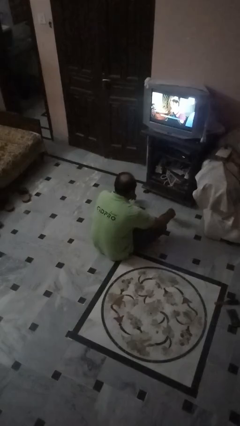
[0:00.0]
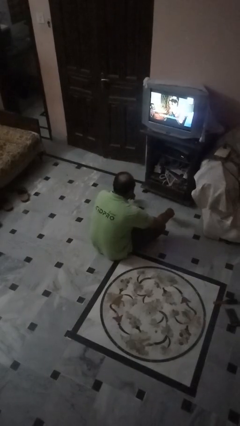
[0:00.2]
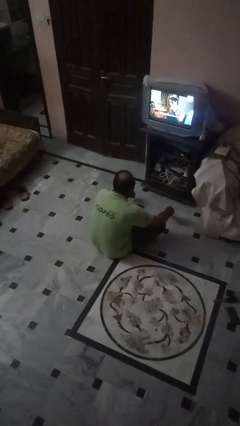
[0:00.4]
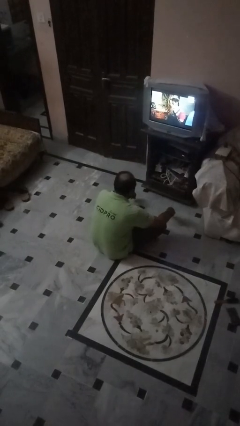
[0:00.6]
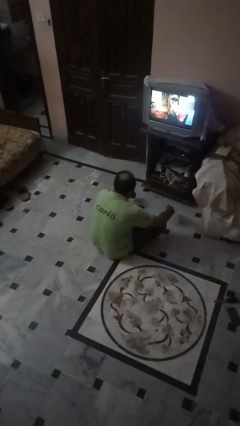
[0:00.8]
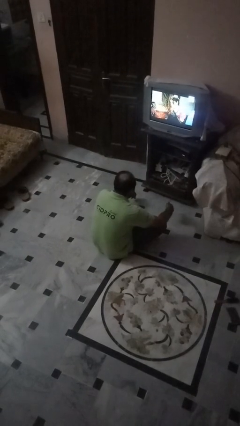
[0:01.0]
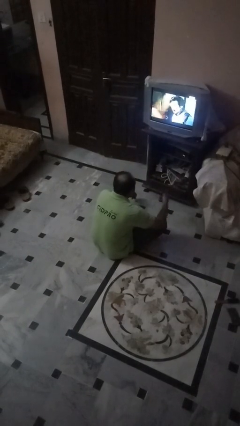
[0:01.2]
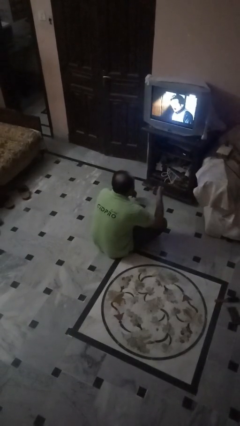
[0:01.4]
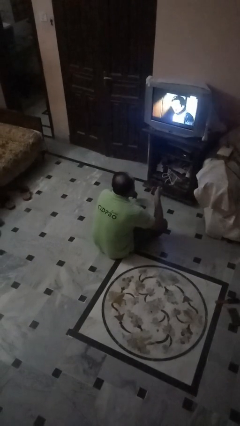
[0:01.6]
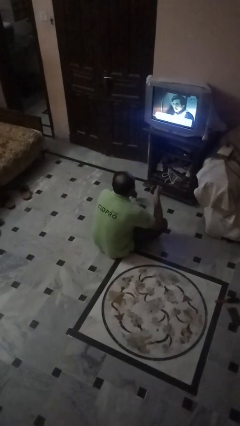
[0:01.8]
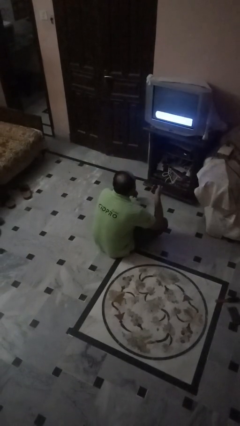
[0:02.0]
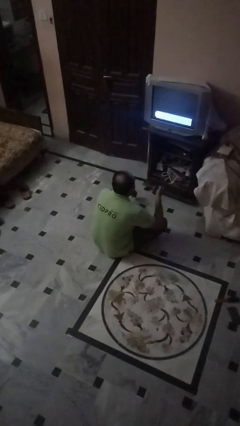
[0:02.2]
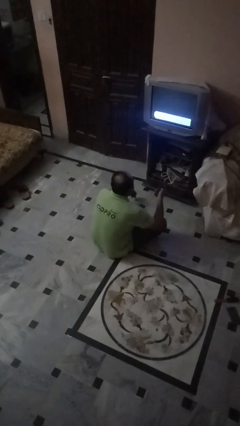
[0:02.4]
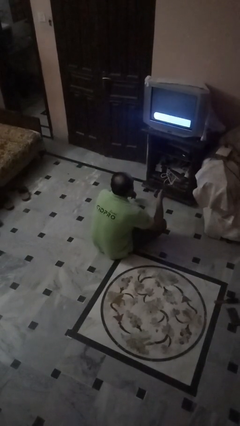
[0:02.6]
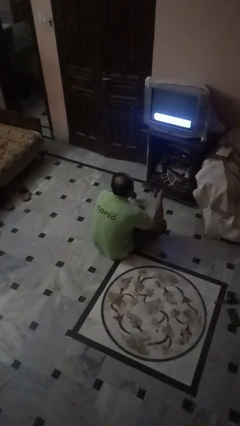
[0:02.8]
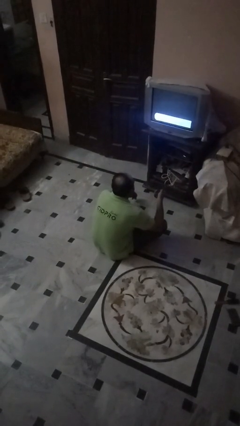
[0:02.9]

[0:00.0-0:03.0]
person uses television remote

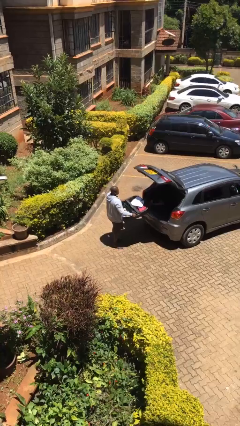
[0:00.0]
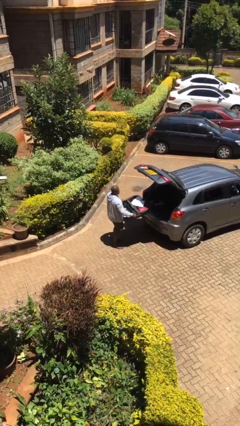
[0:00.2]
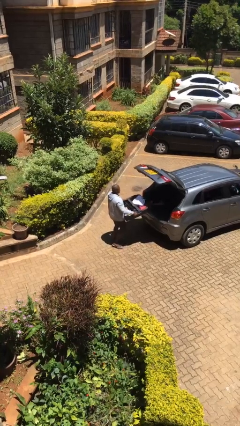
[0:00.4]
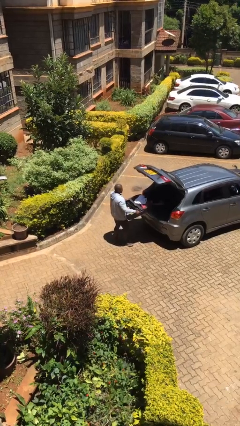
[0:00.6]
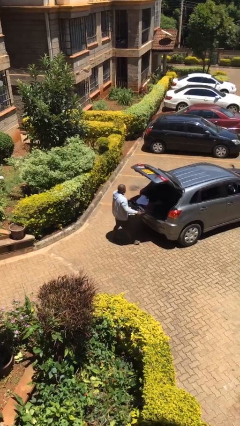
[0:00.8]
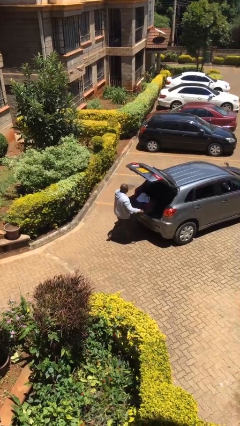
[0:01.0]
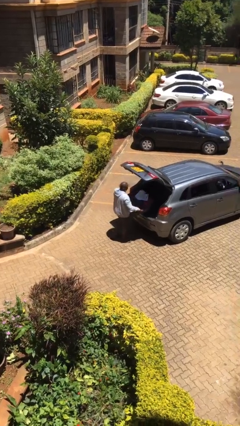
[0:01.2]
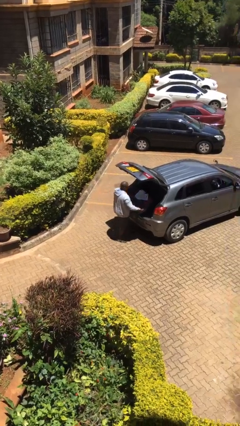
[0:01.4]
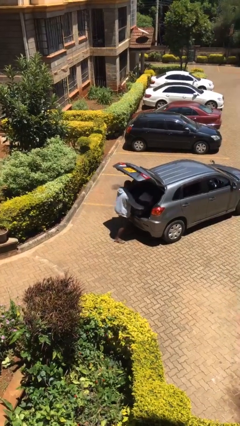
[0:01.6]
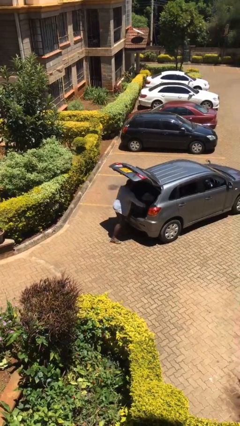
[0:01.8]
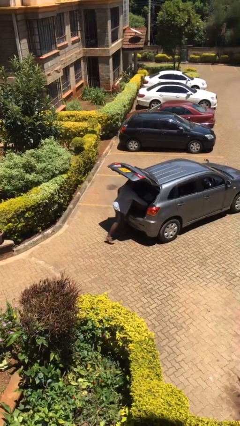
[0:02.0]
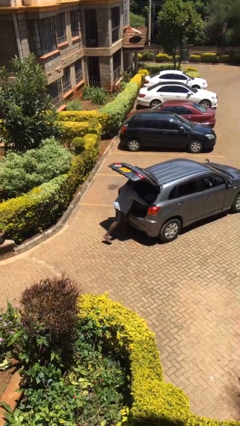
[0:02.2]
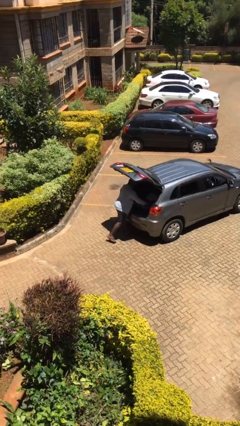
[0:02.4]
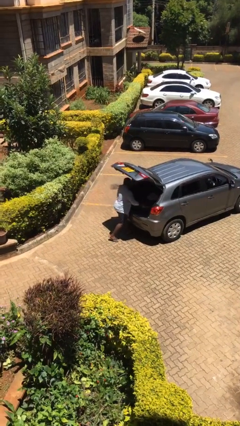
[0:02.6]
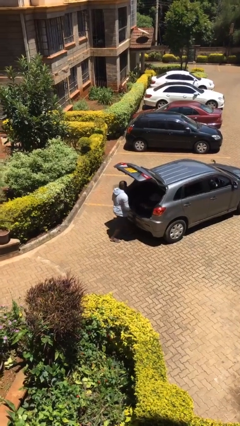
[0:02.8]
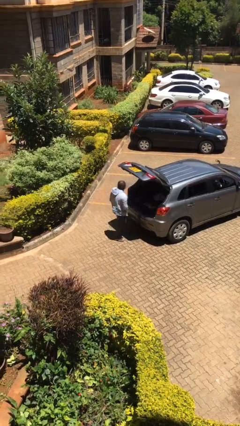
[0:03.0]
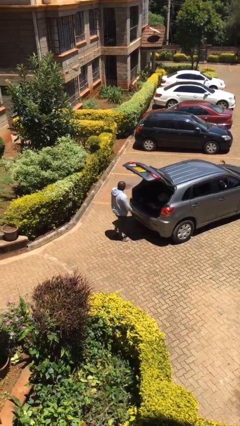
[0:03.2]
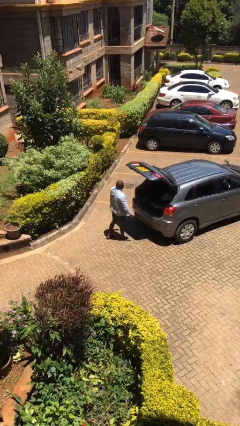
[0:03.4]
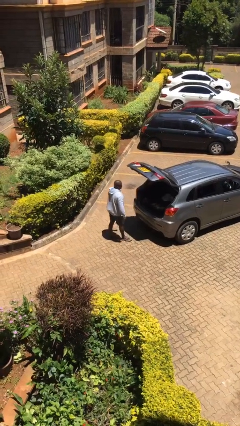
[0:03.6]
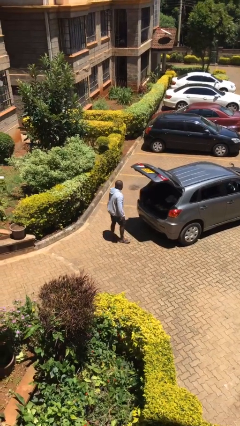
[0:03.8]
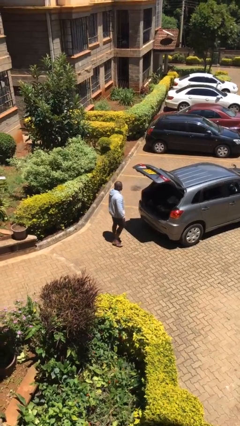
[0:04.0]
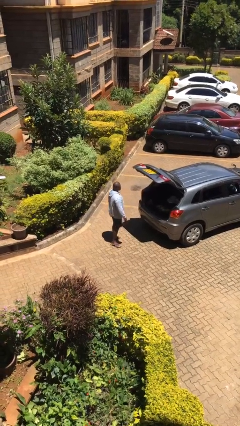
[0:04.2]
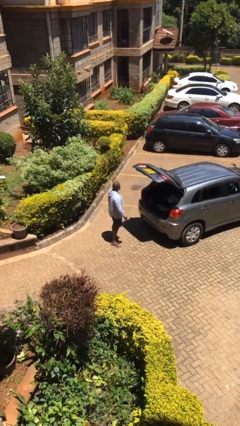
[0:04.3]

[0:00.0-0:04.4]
person loads car

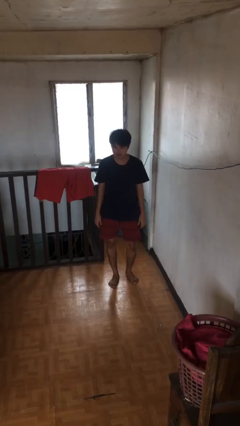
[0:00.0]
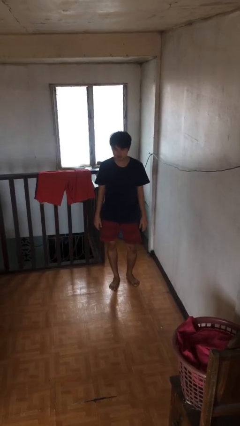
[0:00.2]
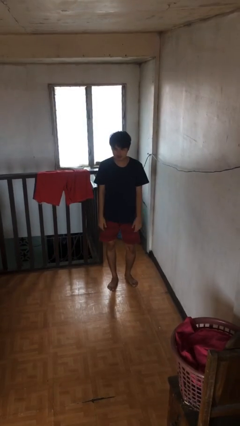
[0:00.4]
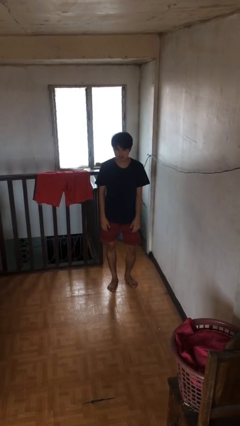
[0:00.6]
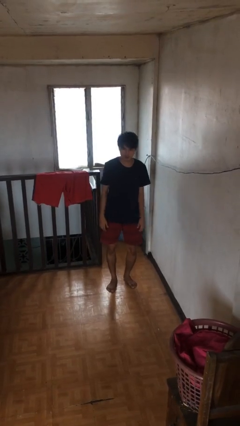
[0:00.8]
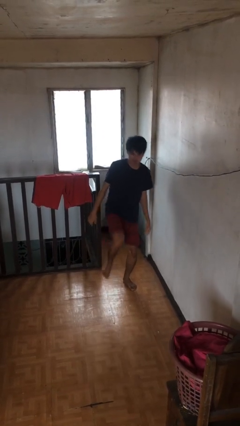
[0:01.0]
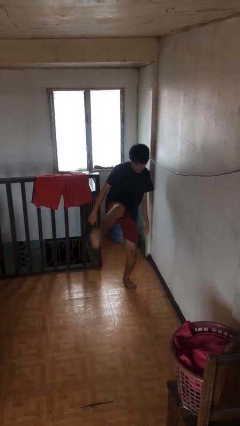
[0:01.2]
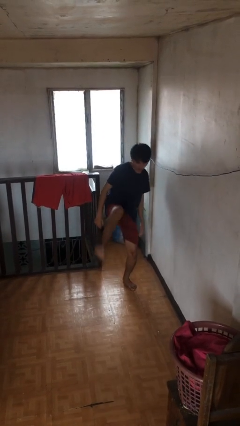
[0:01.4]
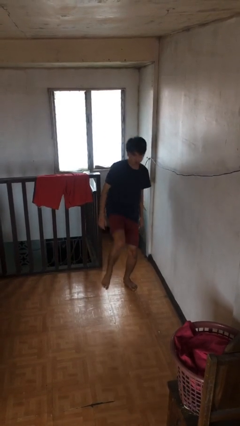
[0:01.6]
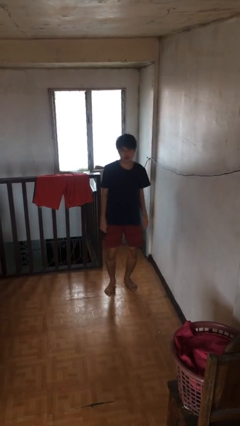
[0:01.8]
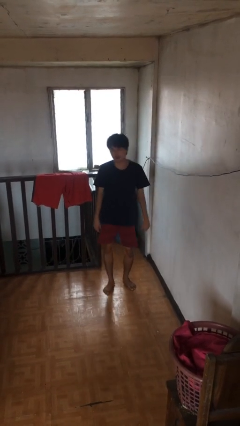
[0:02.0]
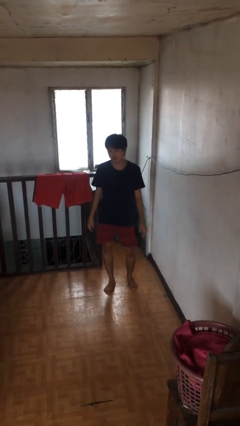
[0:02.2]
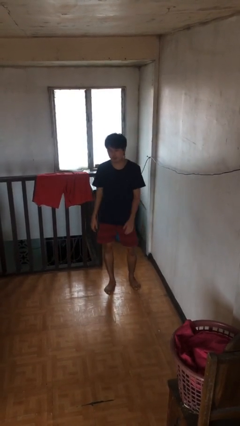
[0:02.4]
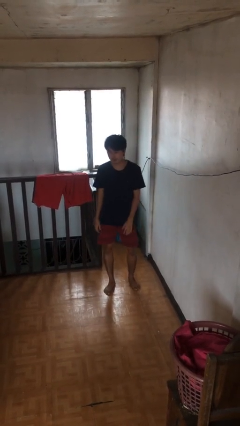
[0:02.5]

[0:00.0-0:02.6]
person karate kicks

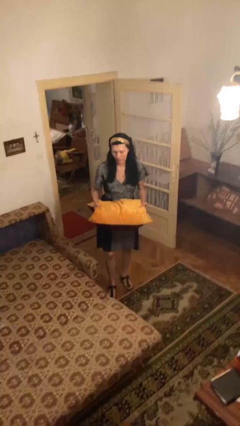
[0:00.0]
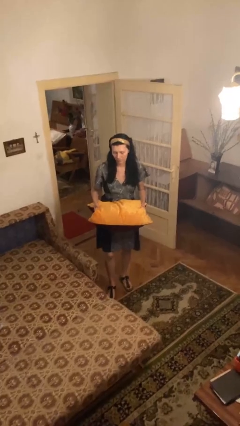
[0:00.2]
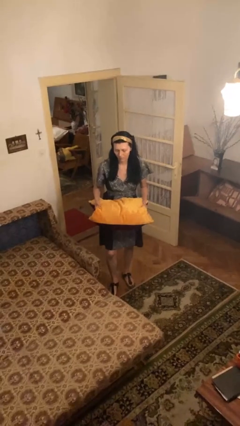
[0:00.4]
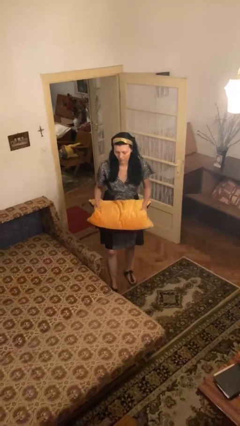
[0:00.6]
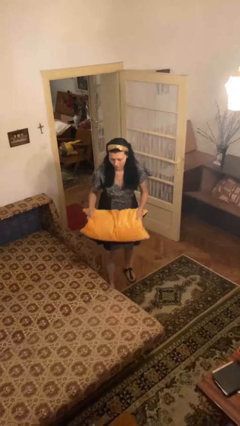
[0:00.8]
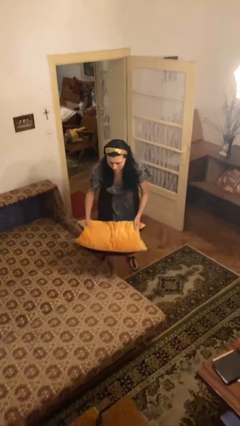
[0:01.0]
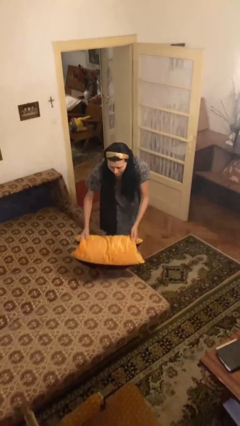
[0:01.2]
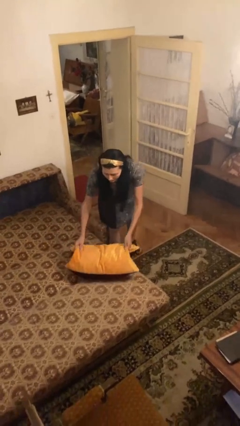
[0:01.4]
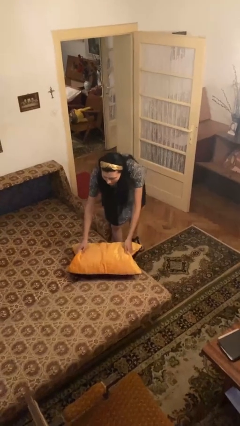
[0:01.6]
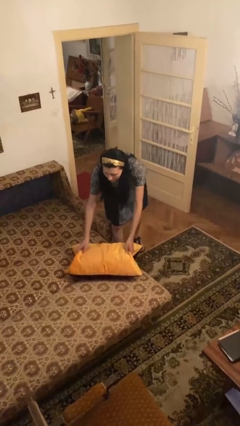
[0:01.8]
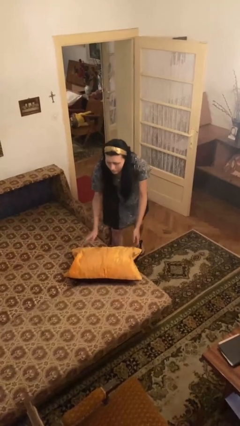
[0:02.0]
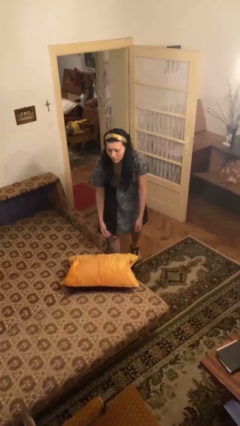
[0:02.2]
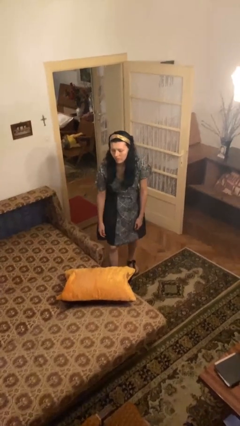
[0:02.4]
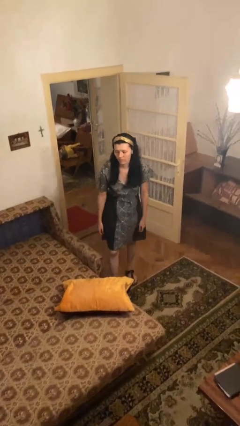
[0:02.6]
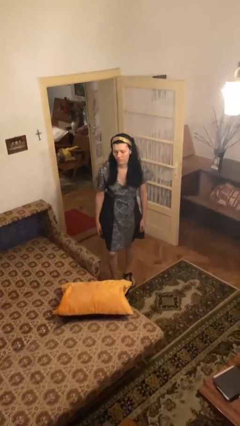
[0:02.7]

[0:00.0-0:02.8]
person puts down object on bed

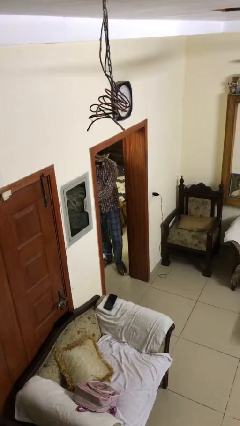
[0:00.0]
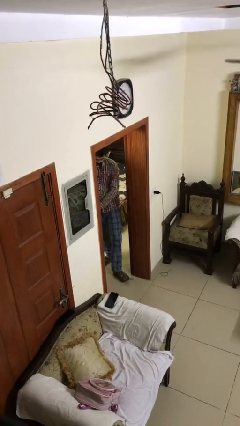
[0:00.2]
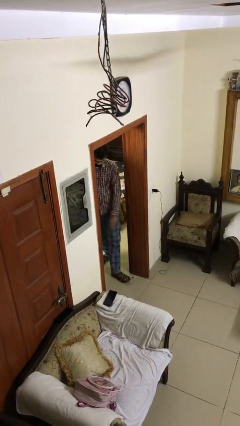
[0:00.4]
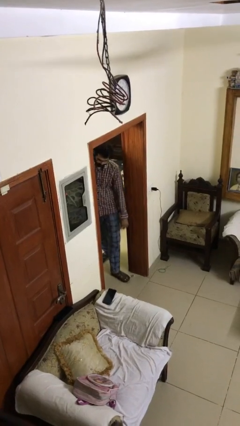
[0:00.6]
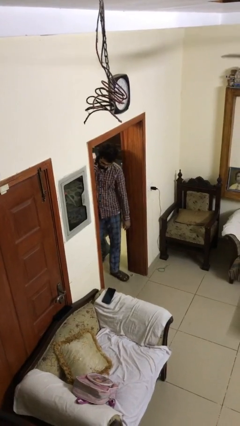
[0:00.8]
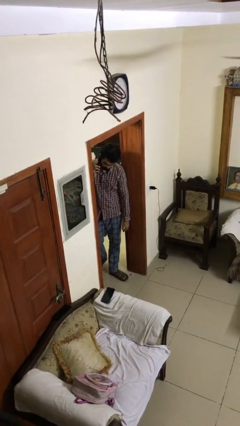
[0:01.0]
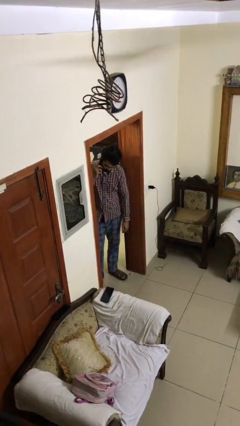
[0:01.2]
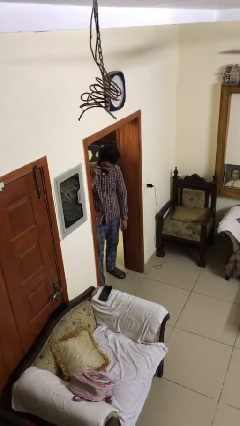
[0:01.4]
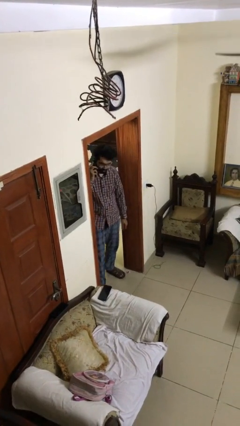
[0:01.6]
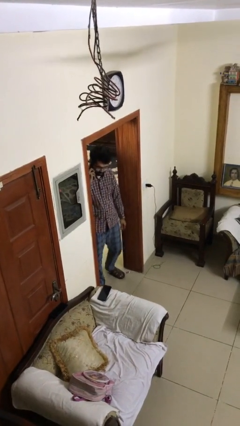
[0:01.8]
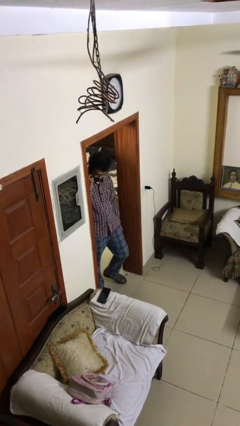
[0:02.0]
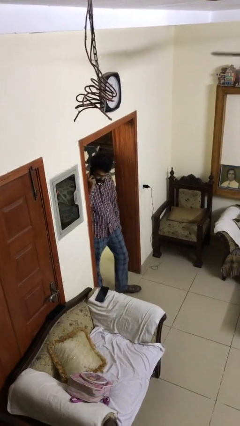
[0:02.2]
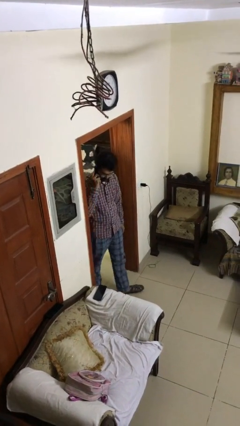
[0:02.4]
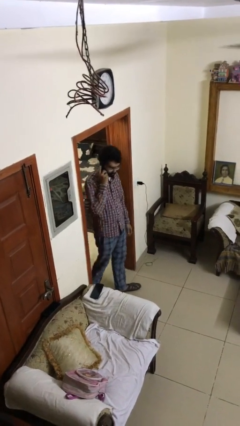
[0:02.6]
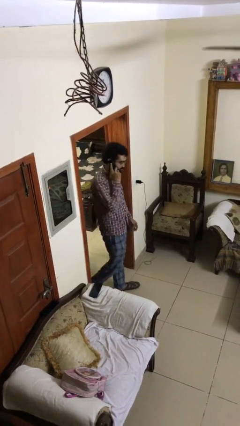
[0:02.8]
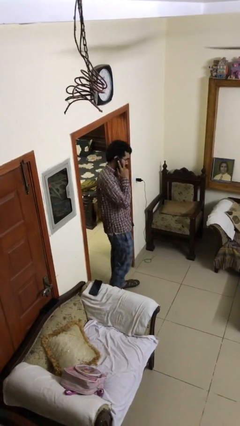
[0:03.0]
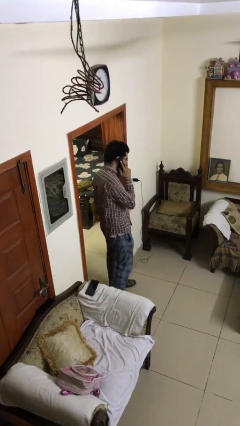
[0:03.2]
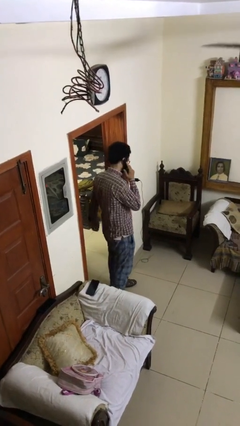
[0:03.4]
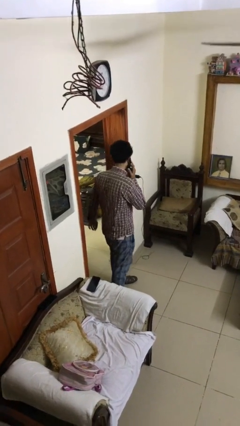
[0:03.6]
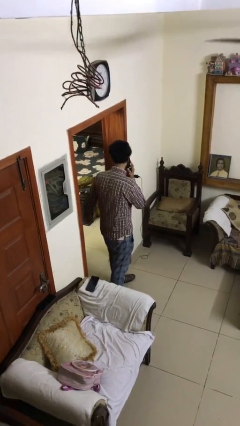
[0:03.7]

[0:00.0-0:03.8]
person enters scene through structure

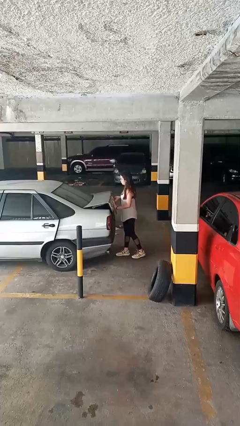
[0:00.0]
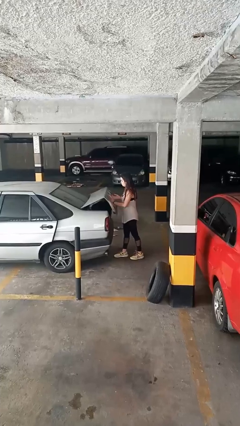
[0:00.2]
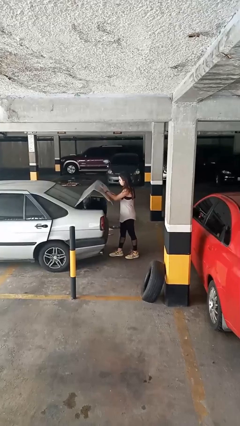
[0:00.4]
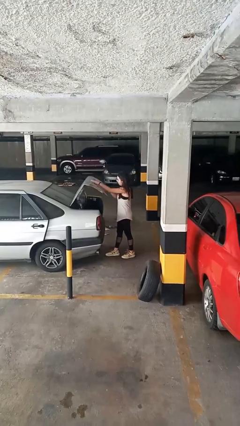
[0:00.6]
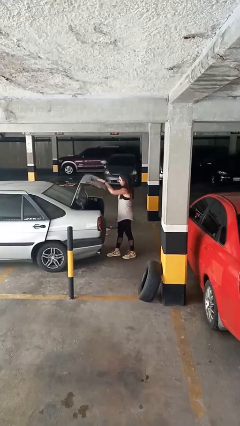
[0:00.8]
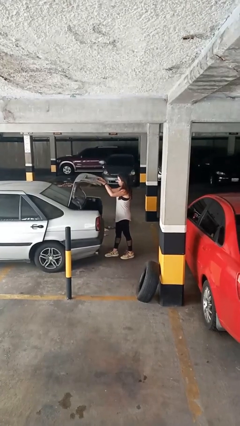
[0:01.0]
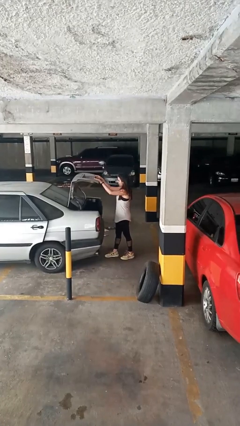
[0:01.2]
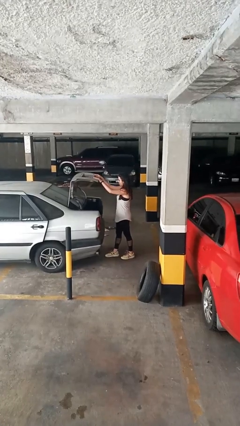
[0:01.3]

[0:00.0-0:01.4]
person opens car trunk
